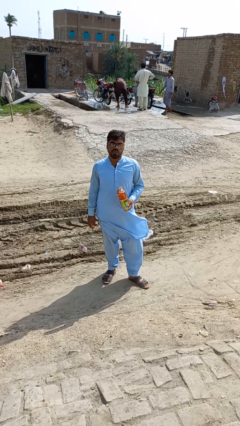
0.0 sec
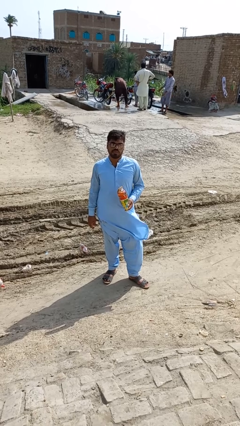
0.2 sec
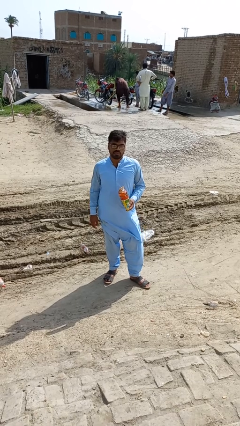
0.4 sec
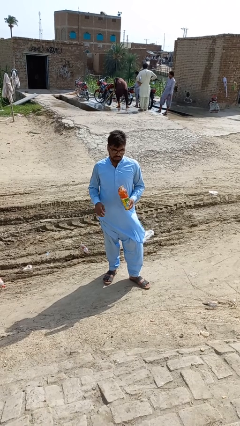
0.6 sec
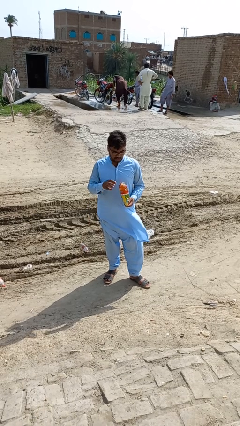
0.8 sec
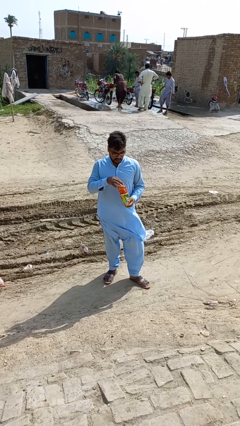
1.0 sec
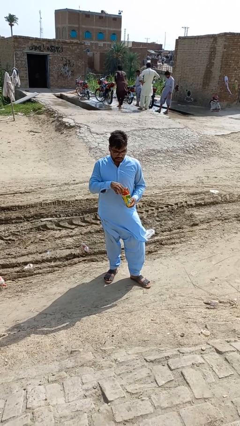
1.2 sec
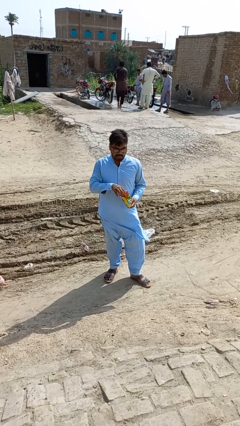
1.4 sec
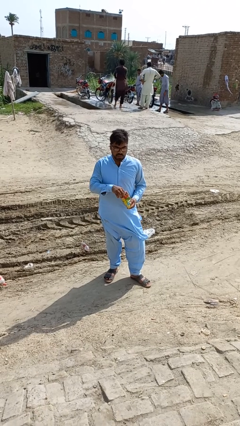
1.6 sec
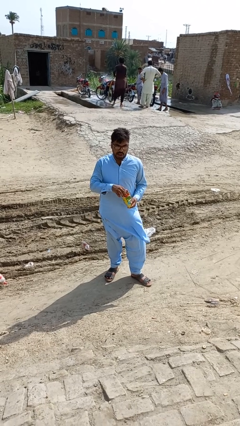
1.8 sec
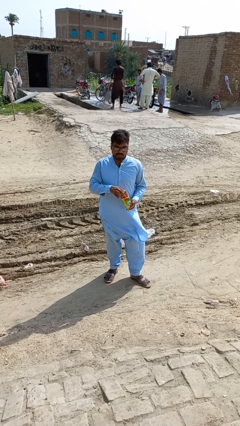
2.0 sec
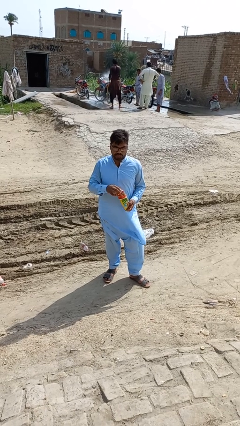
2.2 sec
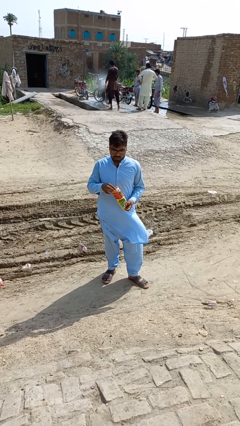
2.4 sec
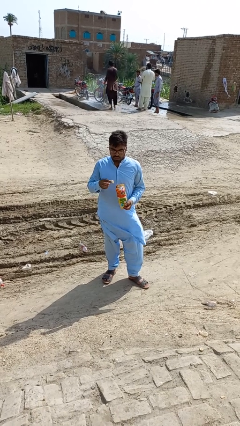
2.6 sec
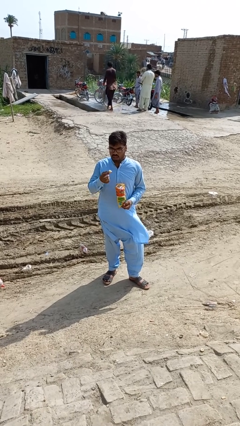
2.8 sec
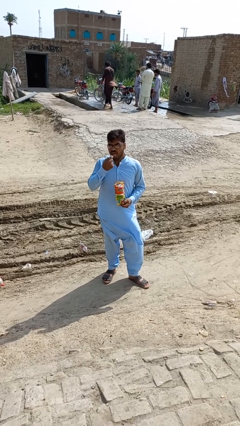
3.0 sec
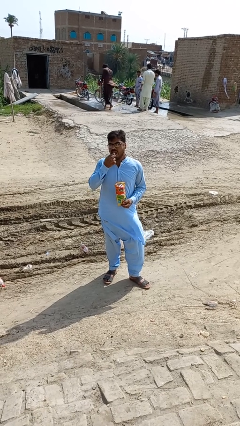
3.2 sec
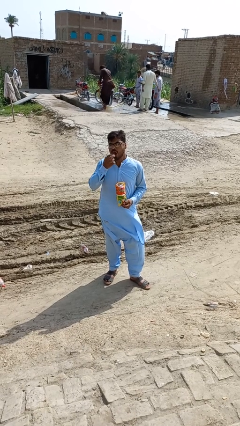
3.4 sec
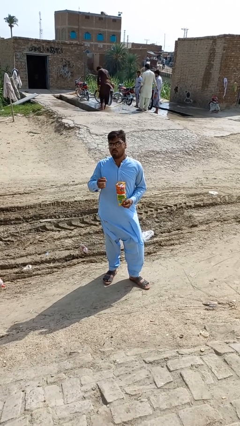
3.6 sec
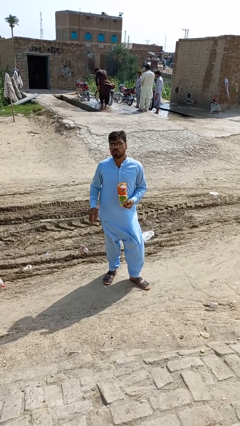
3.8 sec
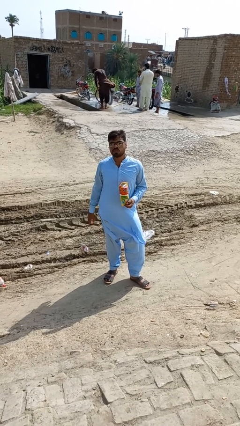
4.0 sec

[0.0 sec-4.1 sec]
person eats snack from bag

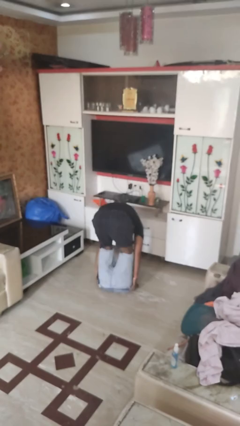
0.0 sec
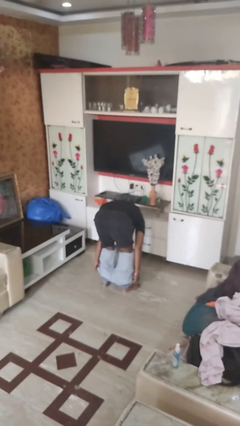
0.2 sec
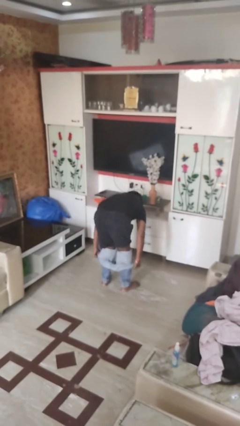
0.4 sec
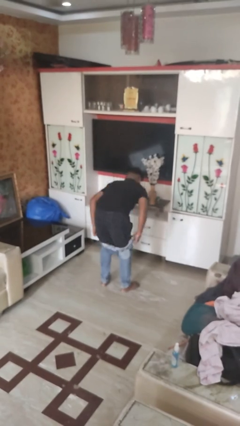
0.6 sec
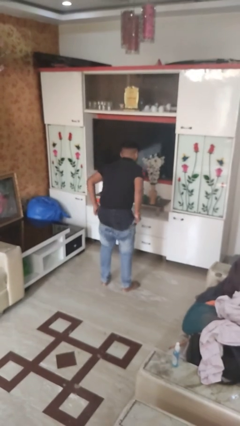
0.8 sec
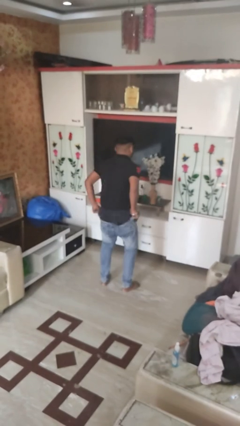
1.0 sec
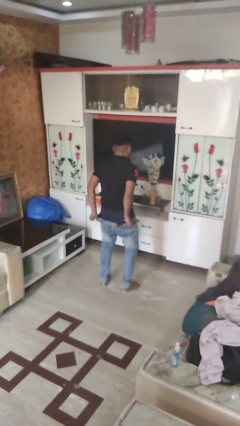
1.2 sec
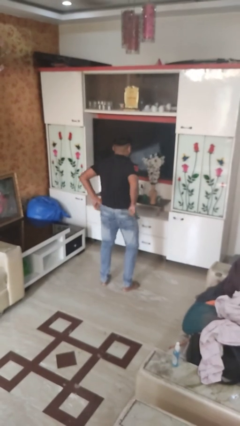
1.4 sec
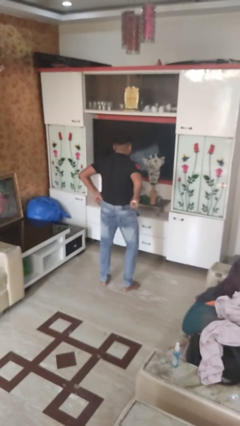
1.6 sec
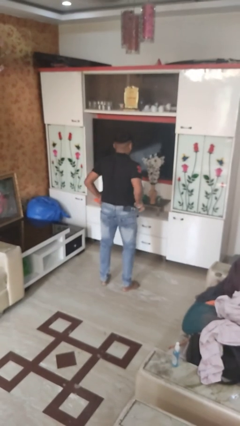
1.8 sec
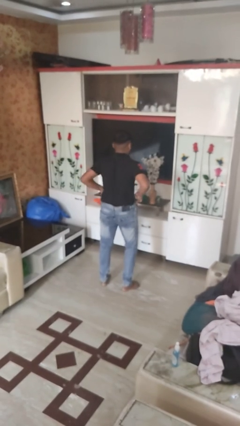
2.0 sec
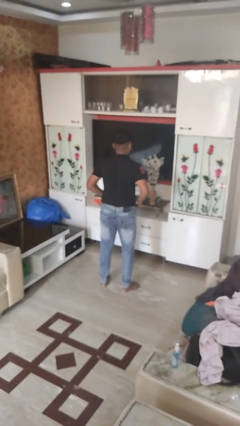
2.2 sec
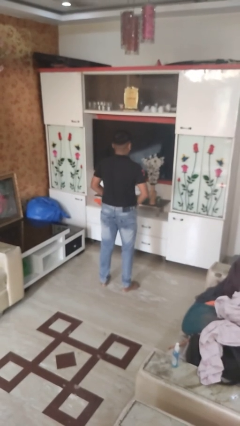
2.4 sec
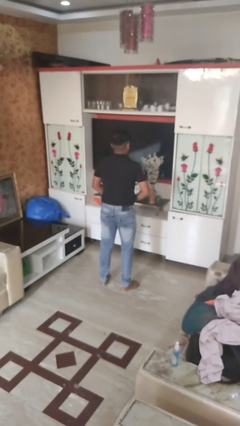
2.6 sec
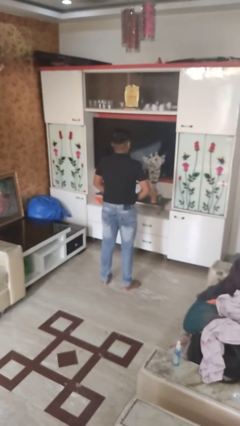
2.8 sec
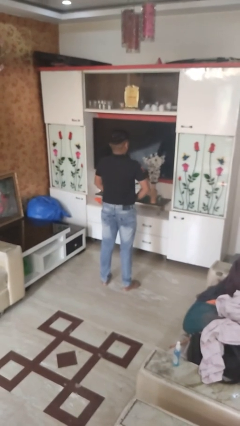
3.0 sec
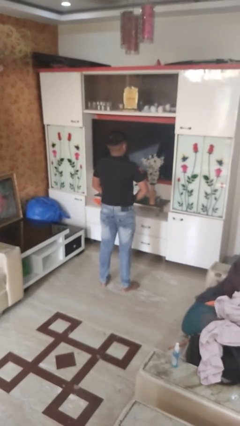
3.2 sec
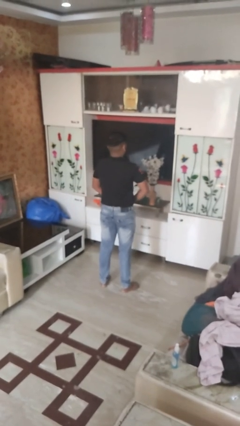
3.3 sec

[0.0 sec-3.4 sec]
person puts on pants

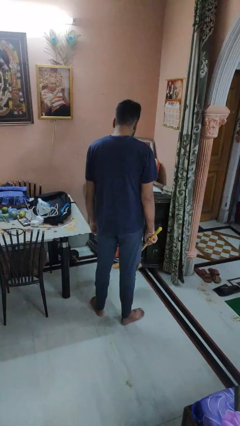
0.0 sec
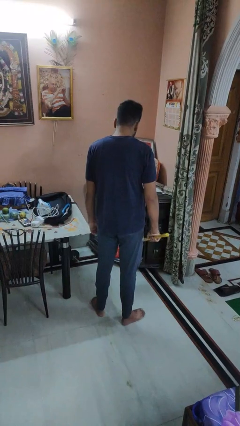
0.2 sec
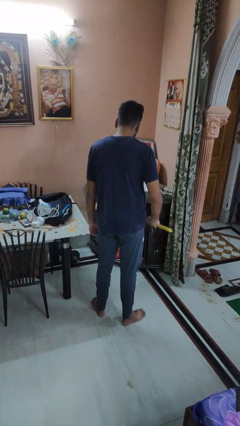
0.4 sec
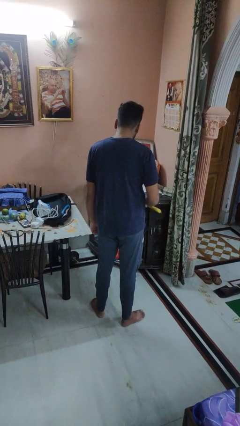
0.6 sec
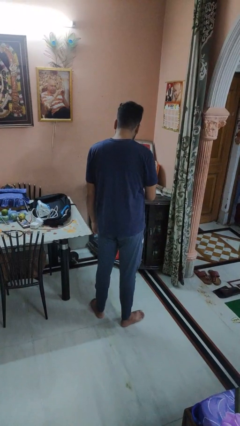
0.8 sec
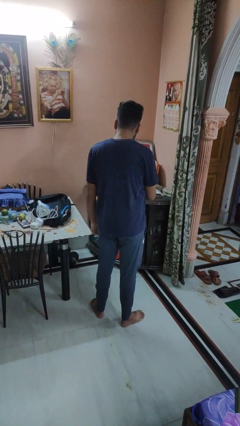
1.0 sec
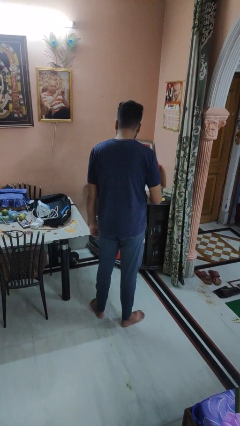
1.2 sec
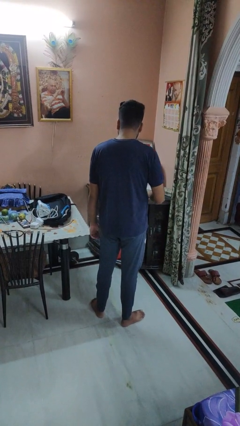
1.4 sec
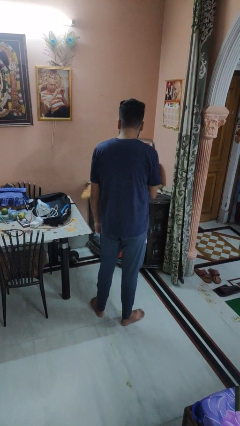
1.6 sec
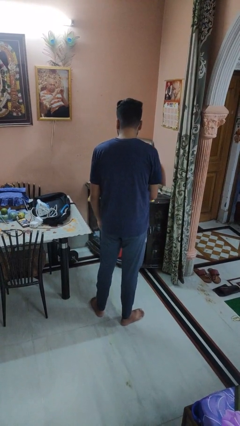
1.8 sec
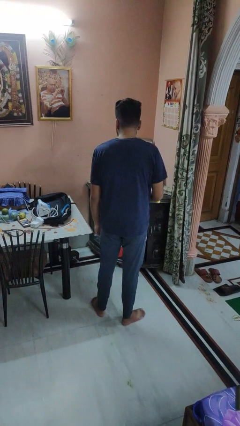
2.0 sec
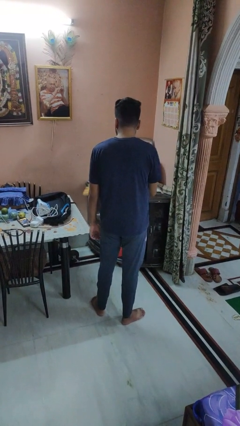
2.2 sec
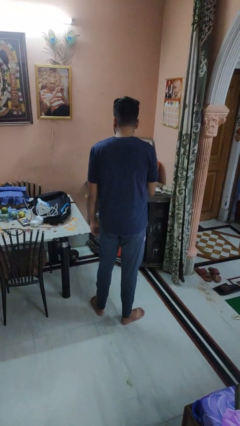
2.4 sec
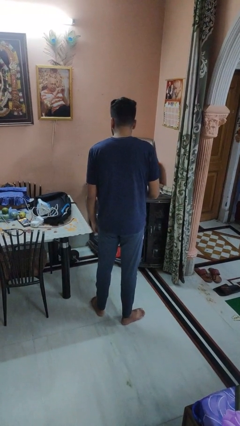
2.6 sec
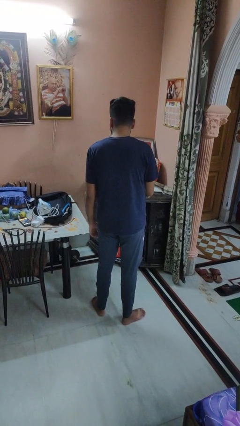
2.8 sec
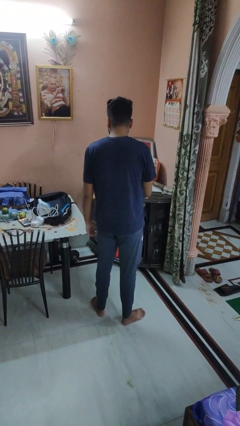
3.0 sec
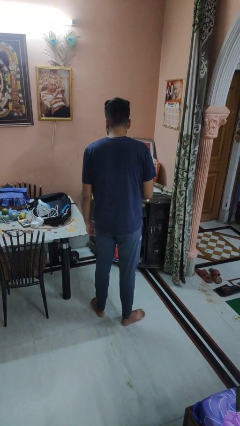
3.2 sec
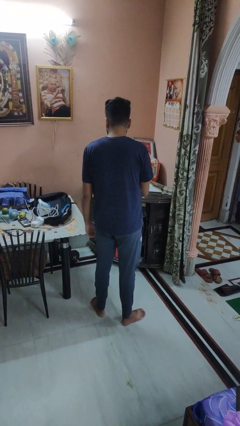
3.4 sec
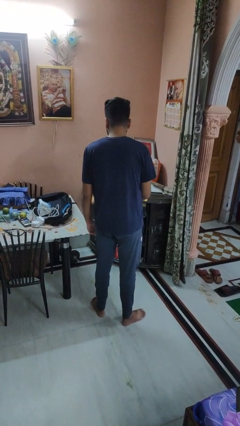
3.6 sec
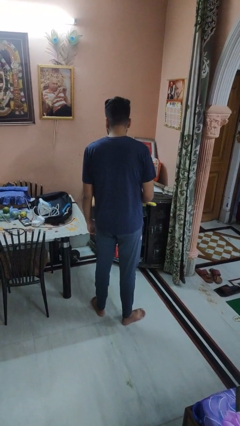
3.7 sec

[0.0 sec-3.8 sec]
person dusts furniture

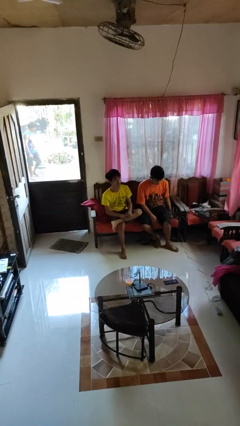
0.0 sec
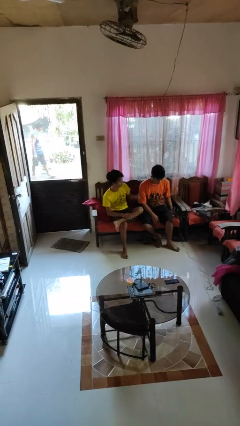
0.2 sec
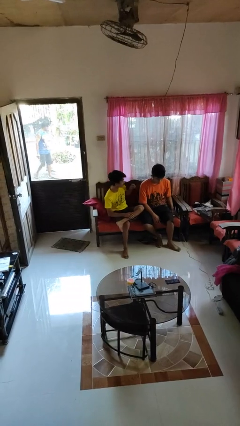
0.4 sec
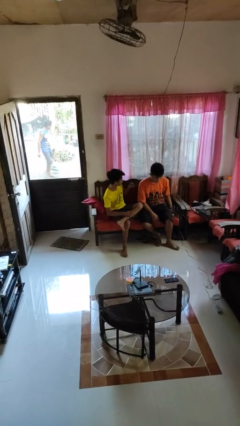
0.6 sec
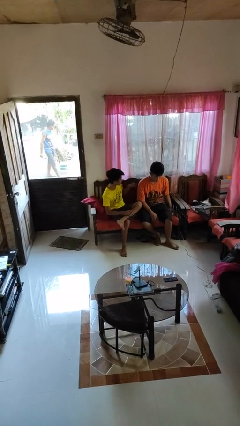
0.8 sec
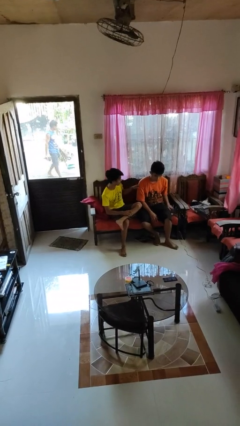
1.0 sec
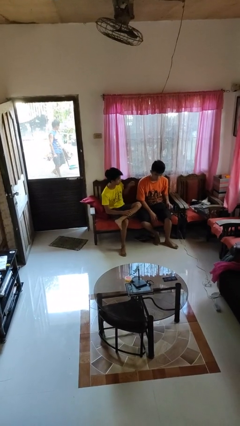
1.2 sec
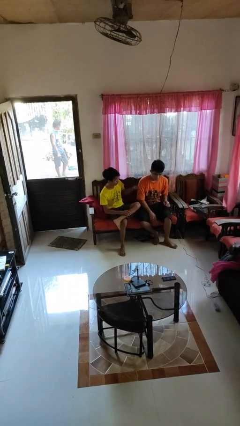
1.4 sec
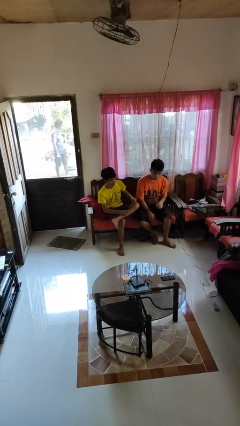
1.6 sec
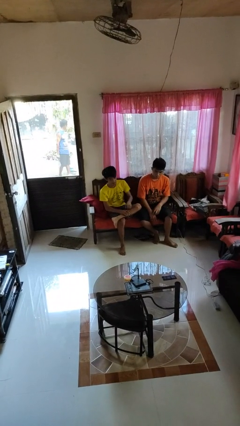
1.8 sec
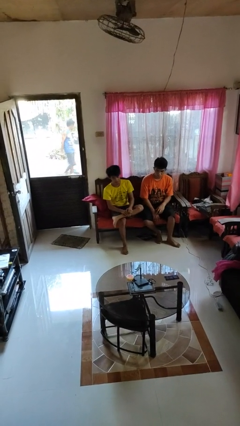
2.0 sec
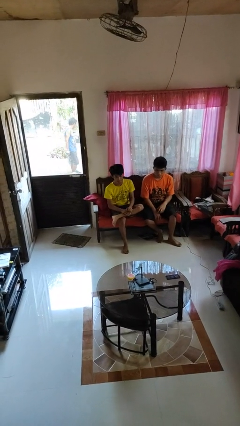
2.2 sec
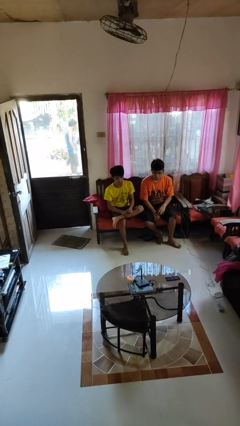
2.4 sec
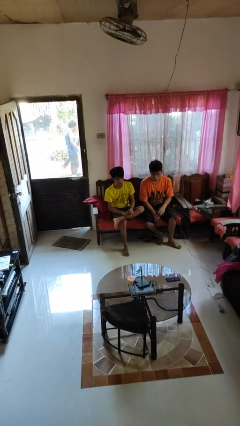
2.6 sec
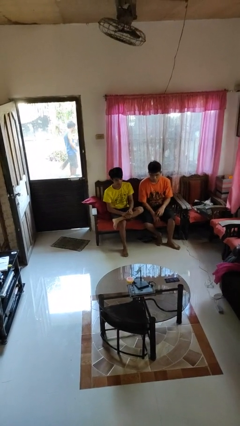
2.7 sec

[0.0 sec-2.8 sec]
person pounds shoulders of person

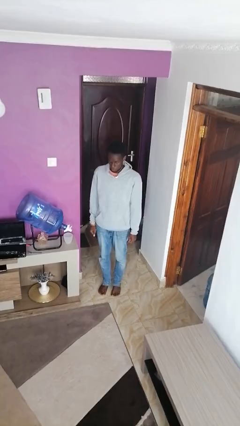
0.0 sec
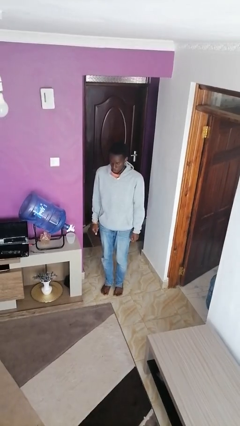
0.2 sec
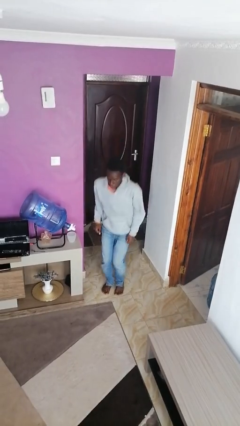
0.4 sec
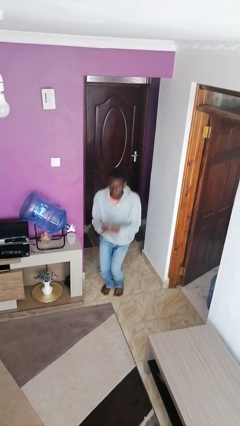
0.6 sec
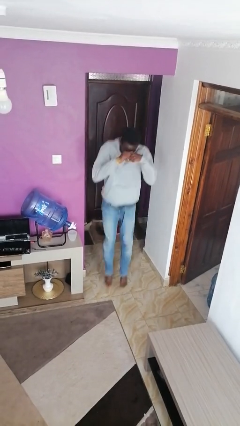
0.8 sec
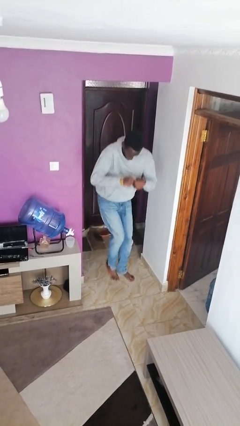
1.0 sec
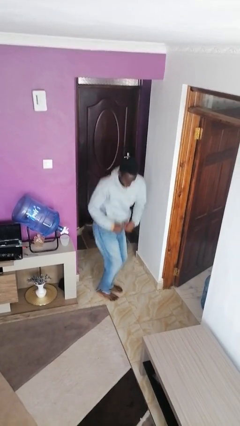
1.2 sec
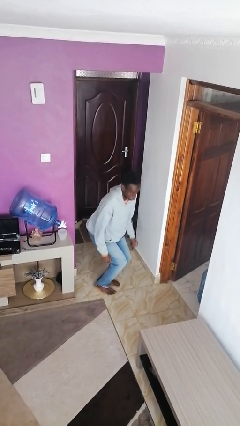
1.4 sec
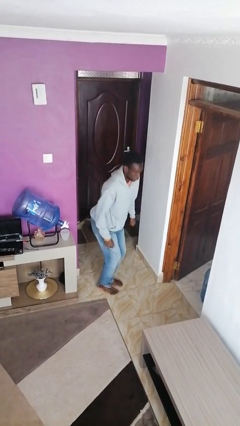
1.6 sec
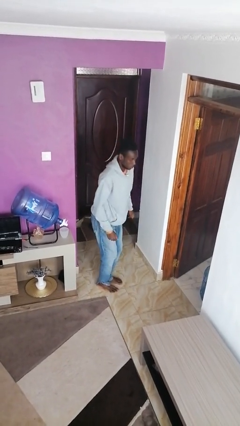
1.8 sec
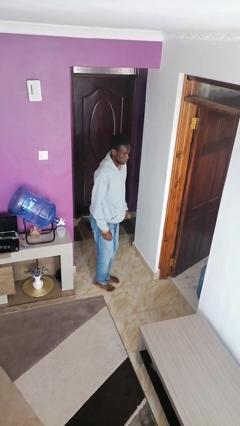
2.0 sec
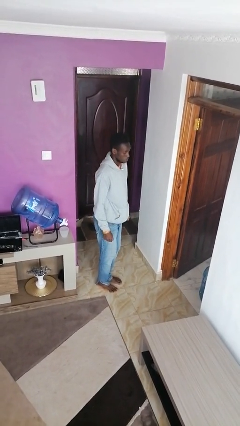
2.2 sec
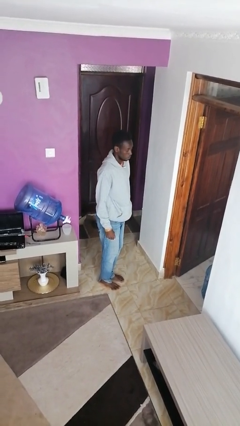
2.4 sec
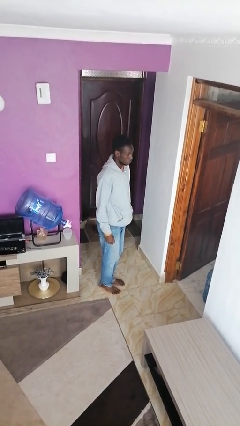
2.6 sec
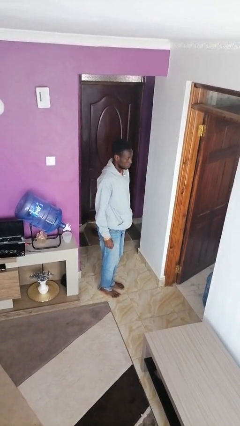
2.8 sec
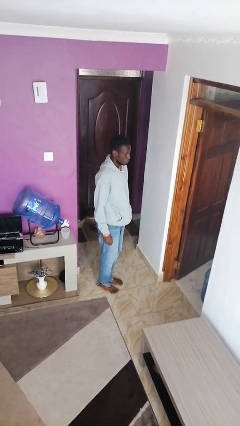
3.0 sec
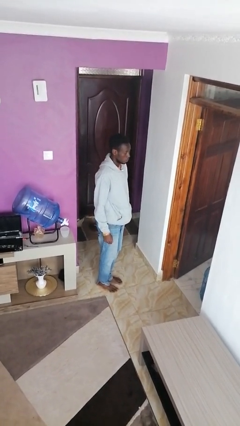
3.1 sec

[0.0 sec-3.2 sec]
person jumps

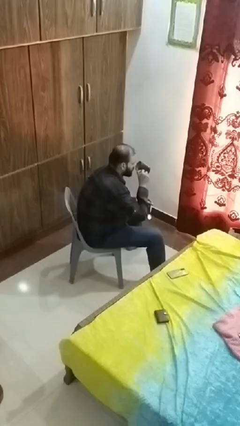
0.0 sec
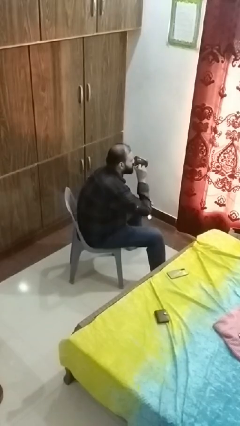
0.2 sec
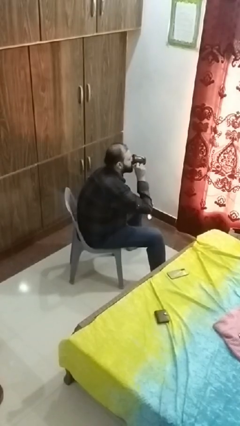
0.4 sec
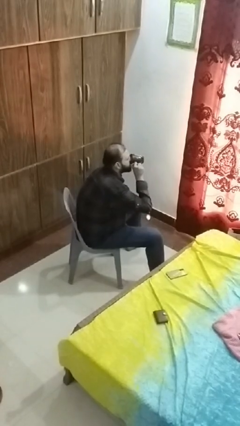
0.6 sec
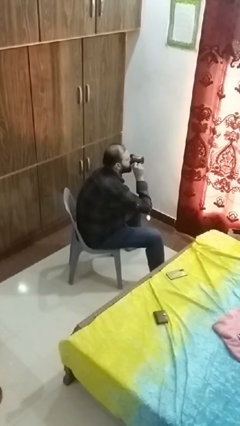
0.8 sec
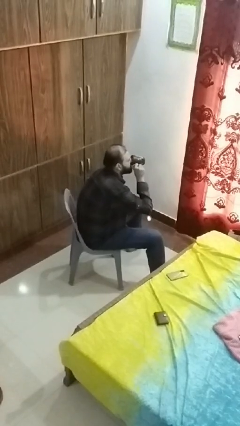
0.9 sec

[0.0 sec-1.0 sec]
person drinks from mug
